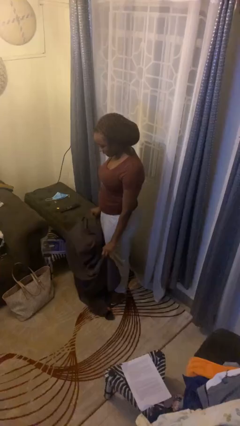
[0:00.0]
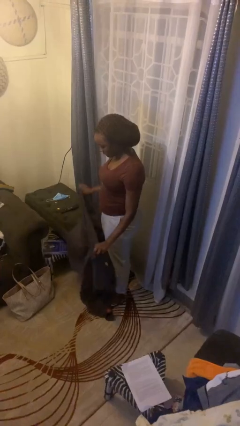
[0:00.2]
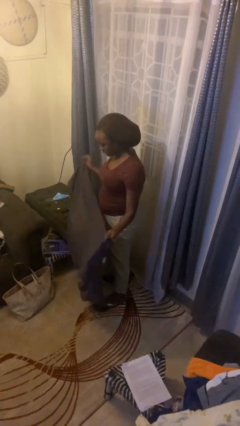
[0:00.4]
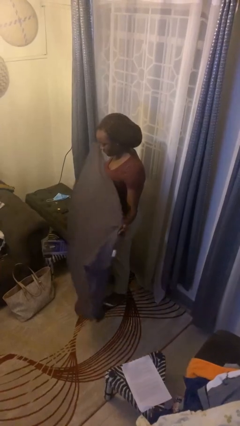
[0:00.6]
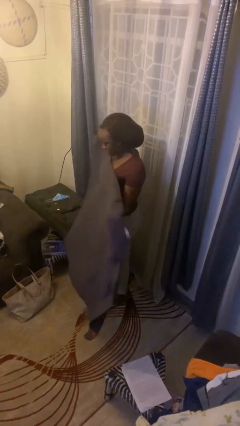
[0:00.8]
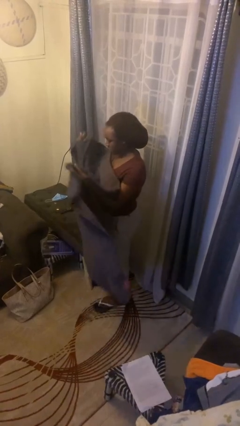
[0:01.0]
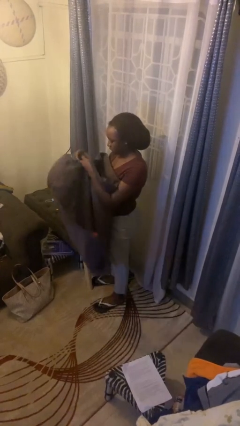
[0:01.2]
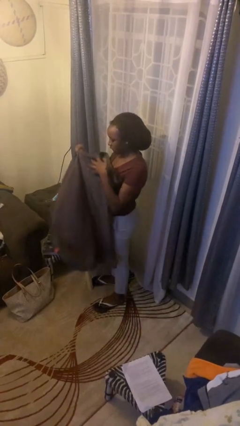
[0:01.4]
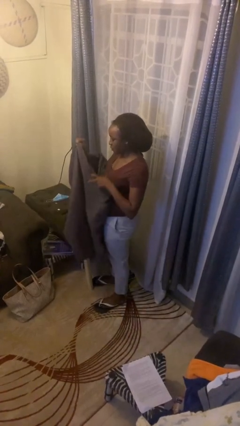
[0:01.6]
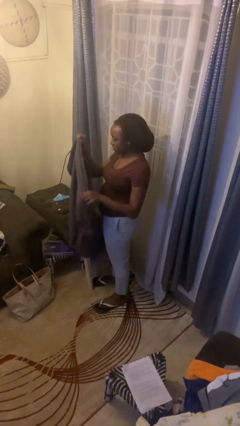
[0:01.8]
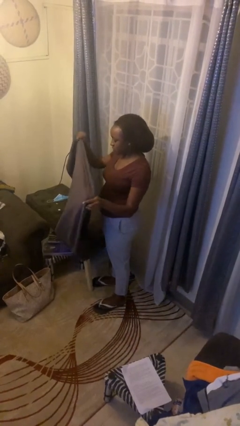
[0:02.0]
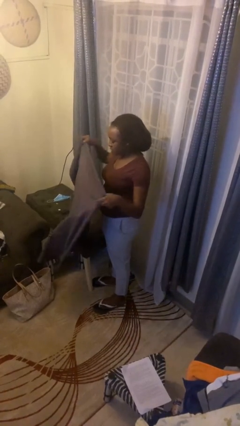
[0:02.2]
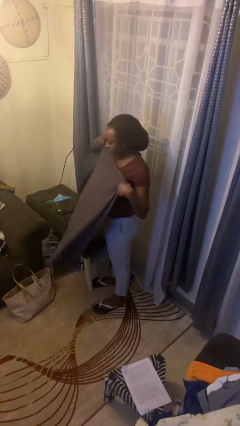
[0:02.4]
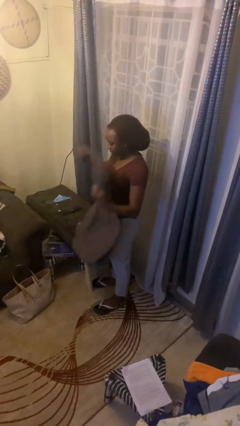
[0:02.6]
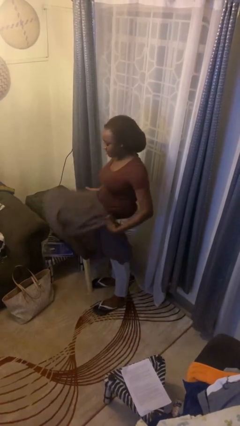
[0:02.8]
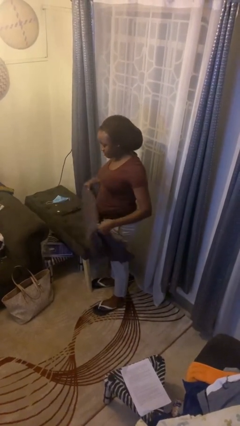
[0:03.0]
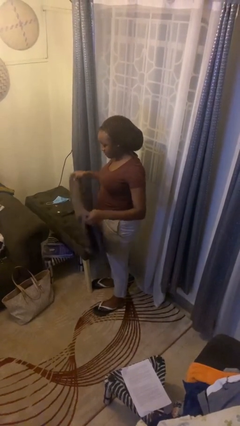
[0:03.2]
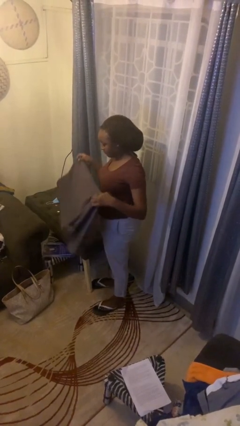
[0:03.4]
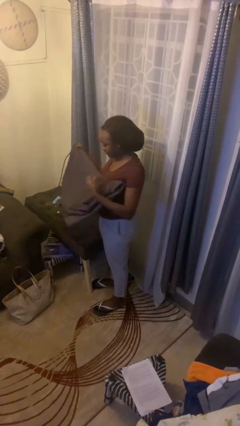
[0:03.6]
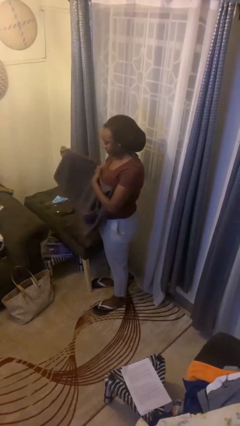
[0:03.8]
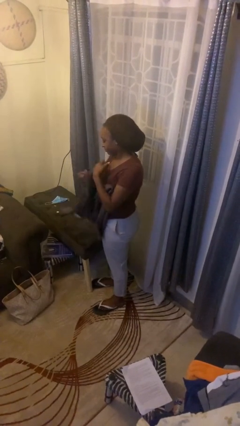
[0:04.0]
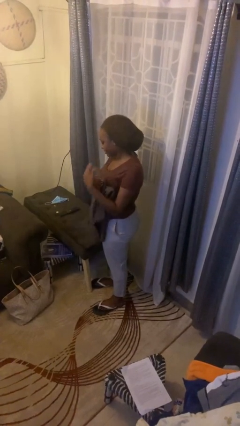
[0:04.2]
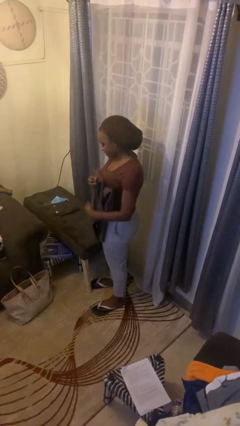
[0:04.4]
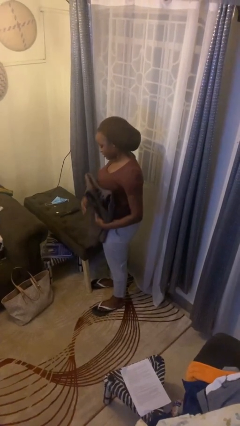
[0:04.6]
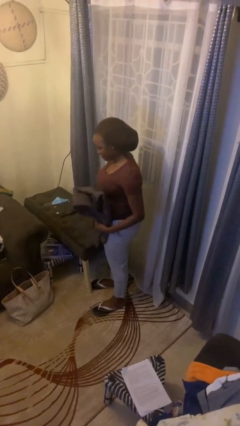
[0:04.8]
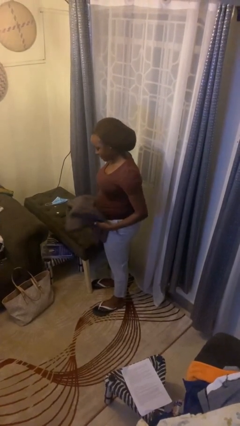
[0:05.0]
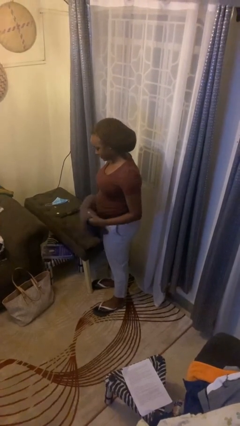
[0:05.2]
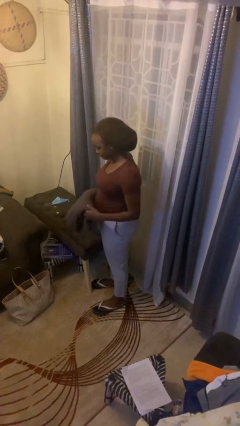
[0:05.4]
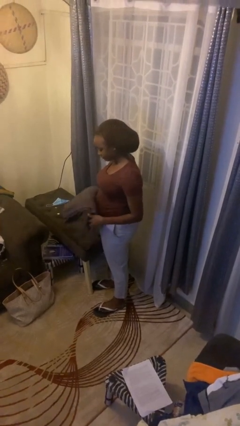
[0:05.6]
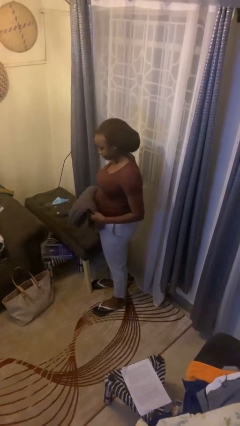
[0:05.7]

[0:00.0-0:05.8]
person folds blanket

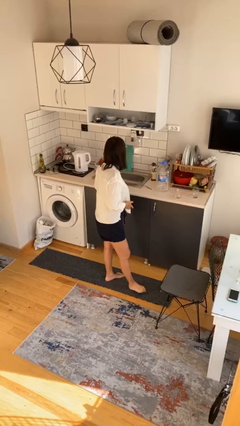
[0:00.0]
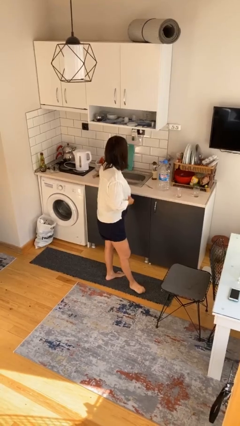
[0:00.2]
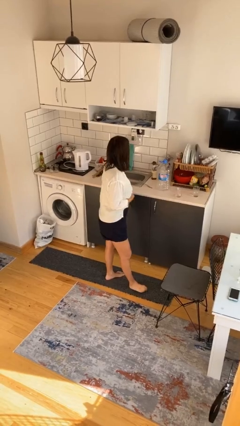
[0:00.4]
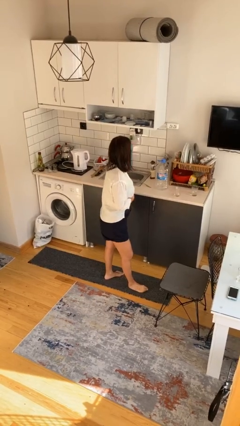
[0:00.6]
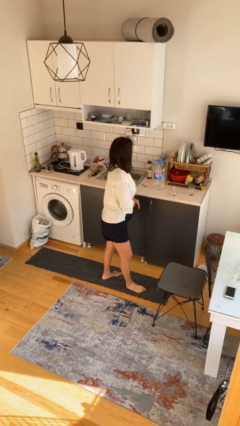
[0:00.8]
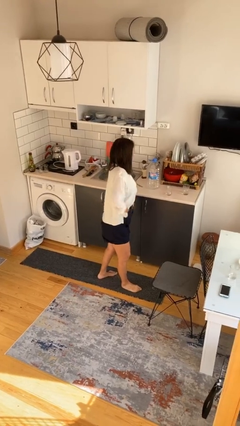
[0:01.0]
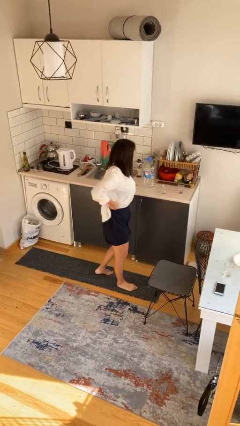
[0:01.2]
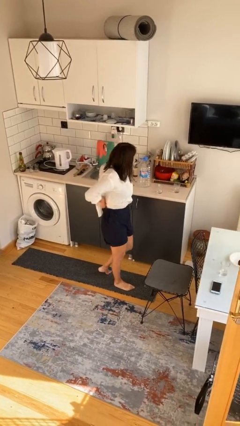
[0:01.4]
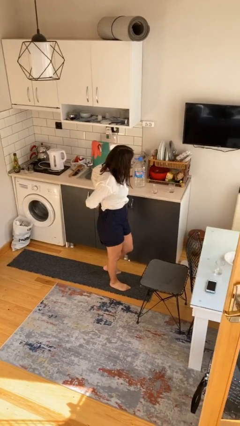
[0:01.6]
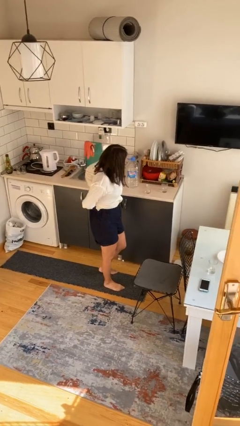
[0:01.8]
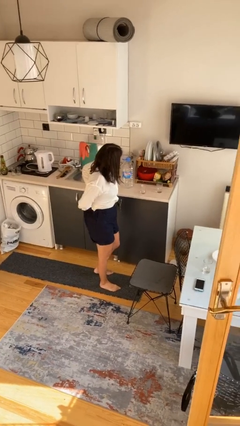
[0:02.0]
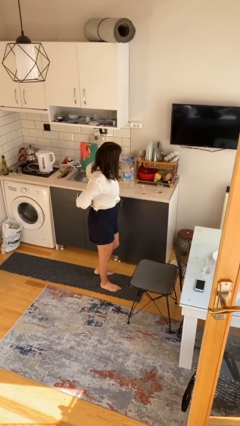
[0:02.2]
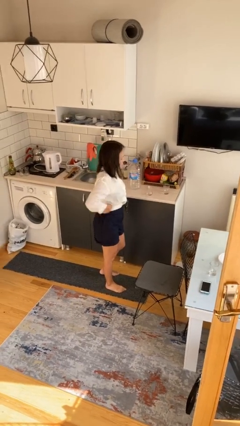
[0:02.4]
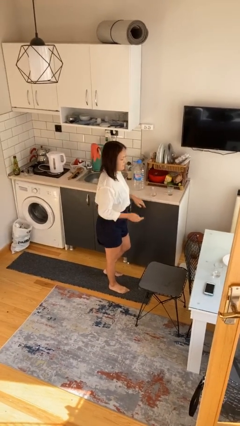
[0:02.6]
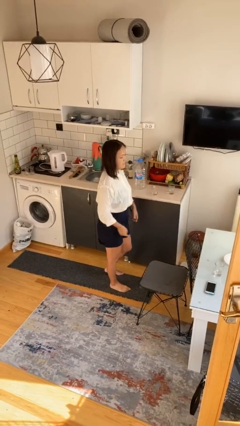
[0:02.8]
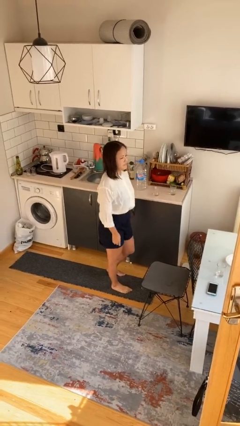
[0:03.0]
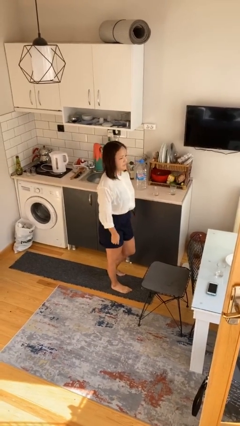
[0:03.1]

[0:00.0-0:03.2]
person tucks in shirt

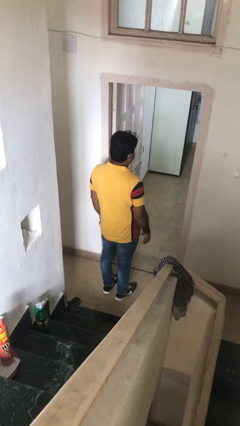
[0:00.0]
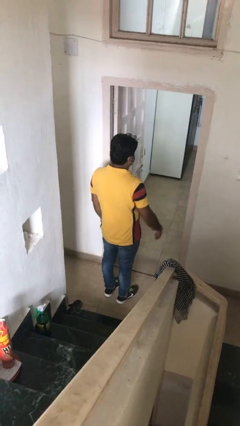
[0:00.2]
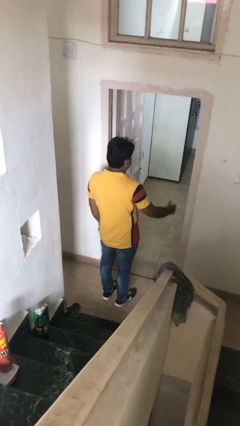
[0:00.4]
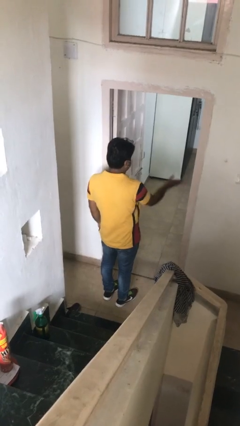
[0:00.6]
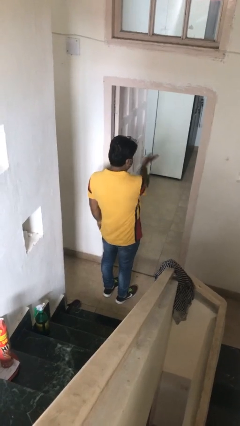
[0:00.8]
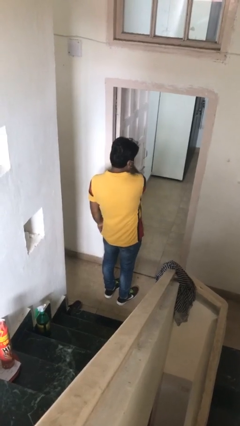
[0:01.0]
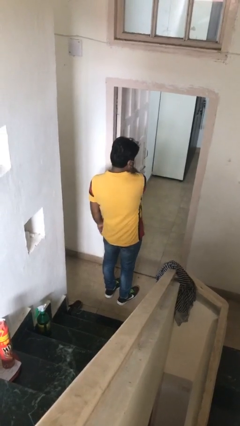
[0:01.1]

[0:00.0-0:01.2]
person gestures swipe left

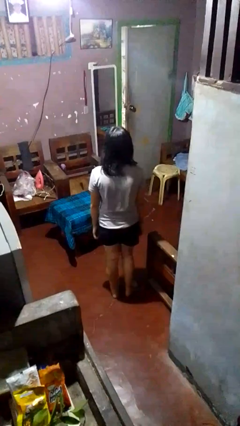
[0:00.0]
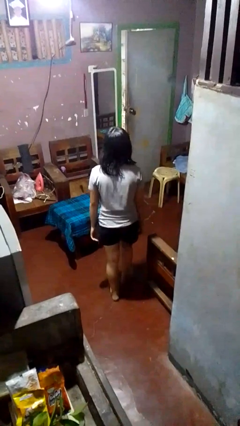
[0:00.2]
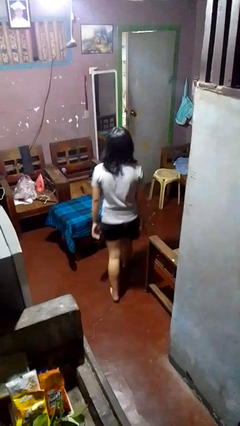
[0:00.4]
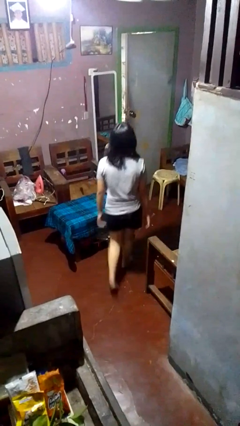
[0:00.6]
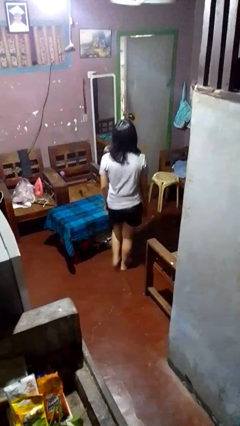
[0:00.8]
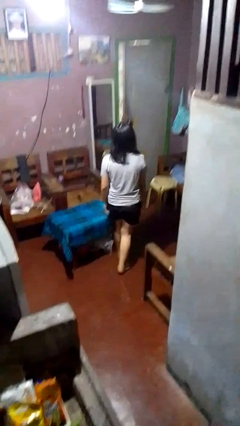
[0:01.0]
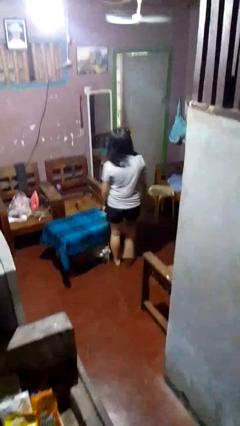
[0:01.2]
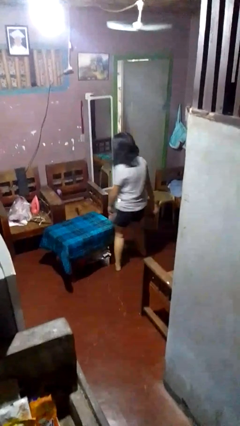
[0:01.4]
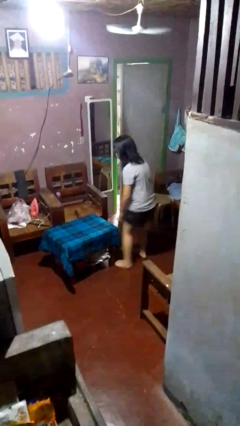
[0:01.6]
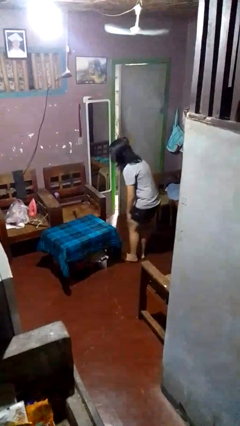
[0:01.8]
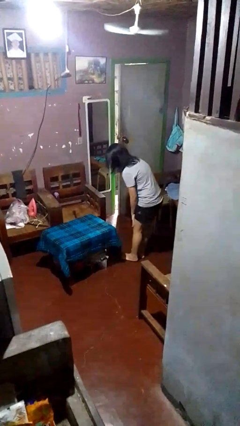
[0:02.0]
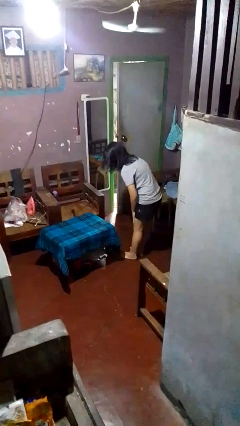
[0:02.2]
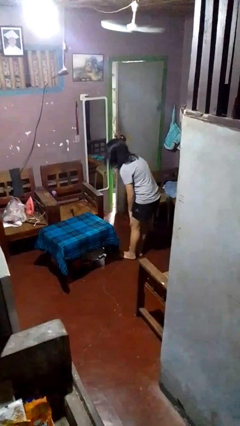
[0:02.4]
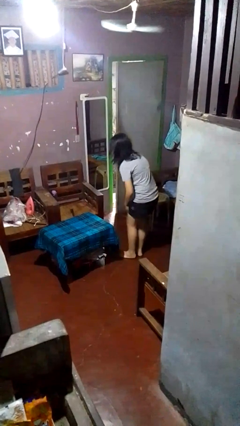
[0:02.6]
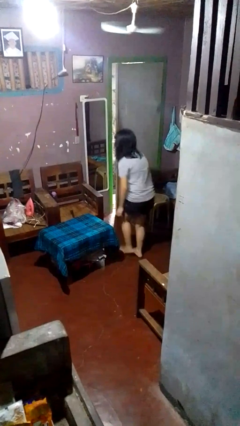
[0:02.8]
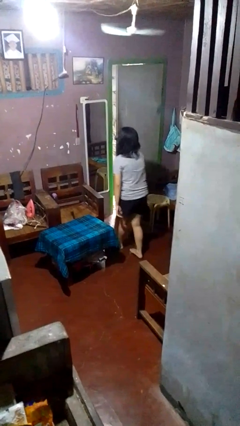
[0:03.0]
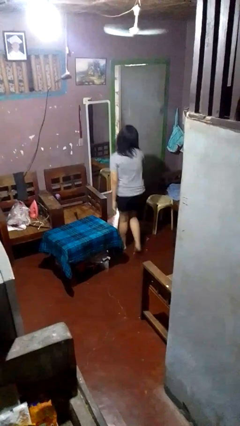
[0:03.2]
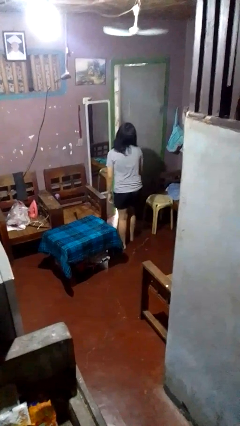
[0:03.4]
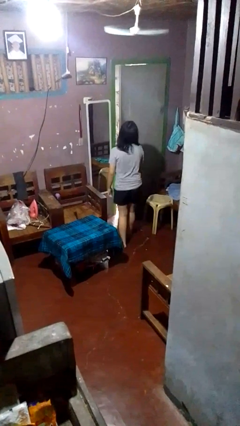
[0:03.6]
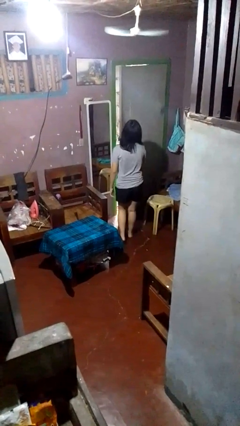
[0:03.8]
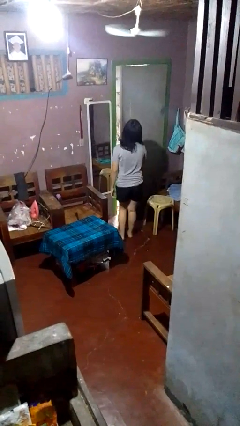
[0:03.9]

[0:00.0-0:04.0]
person bumps into table

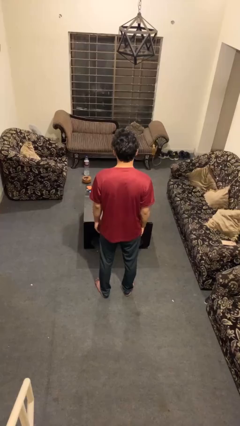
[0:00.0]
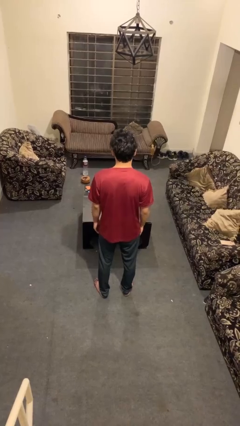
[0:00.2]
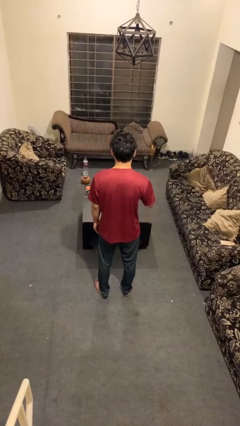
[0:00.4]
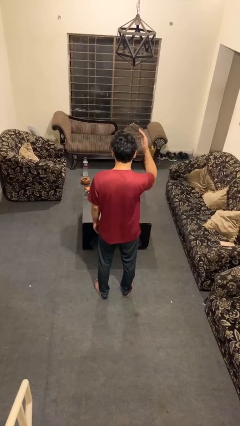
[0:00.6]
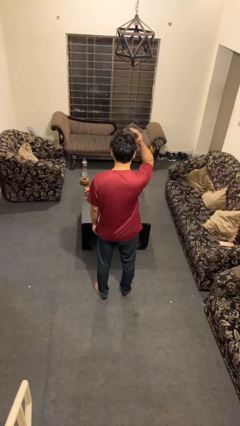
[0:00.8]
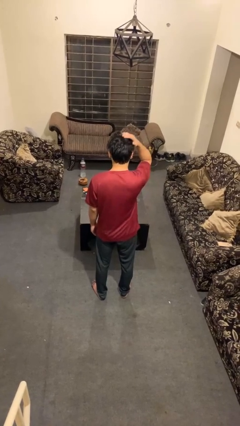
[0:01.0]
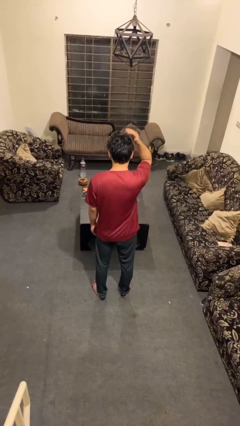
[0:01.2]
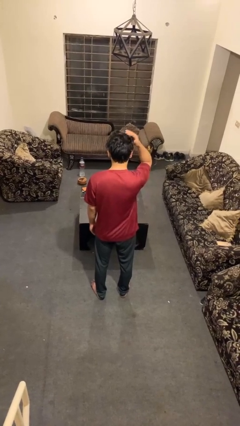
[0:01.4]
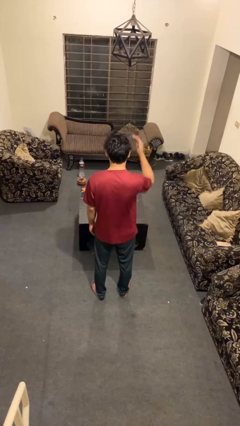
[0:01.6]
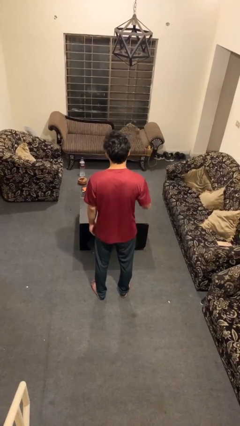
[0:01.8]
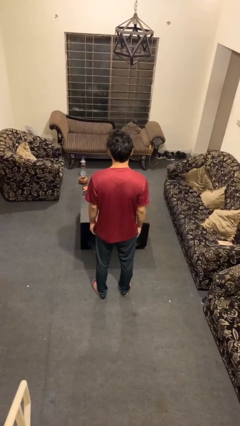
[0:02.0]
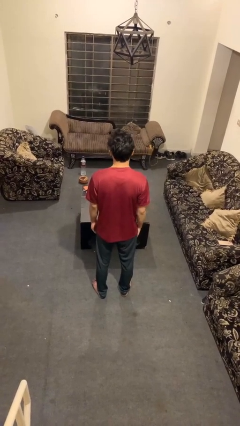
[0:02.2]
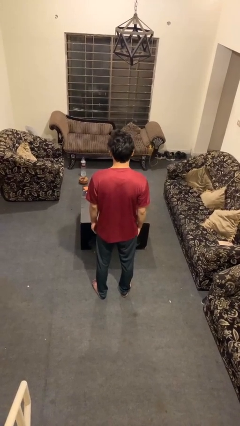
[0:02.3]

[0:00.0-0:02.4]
person pats head

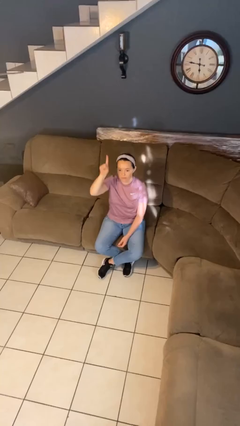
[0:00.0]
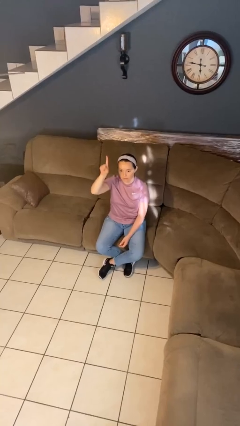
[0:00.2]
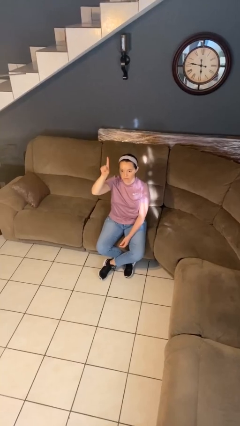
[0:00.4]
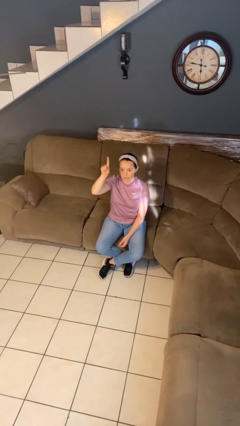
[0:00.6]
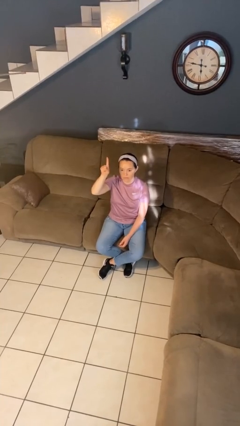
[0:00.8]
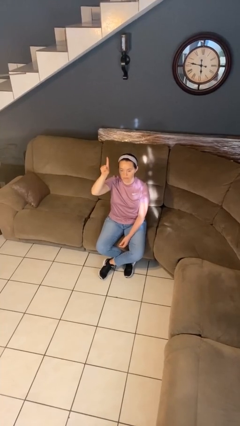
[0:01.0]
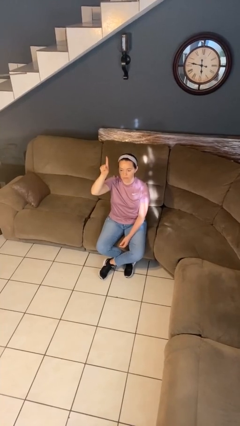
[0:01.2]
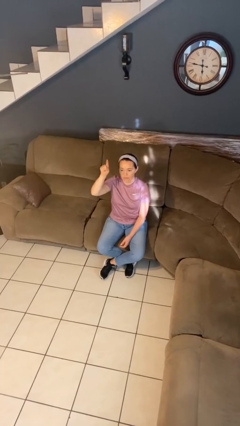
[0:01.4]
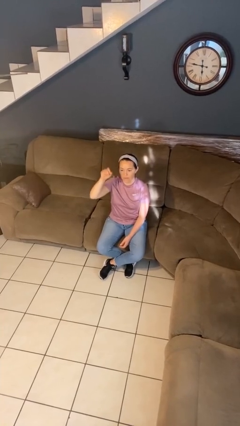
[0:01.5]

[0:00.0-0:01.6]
person gestures number one
